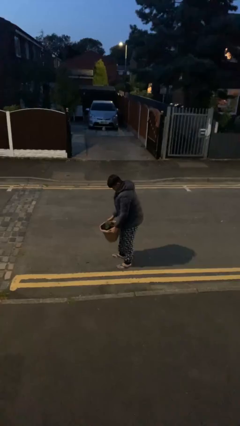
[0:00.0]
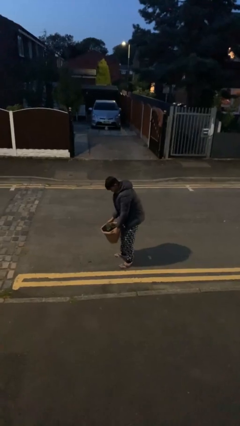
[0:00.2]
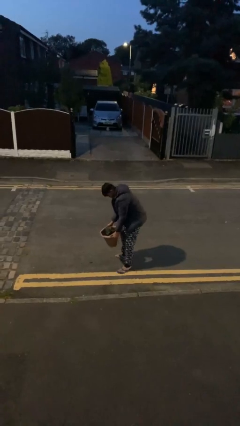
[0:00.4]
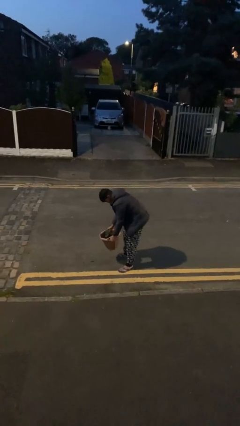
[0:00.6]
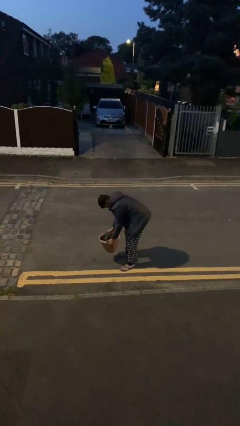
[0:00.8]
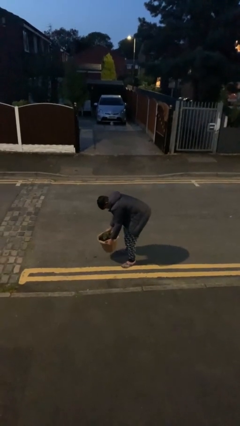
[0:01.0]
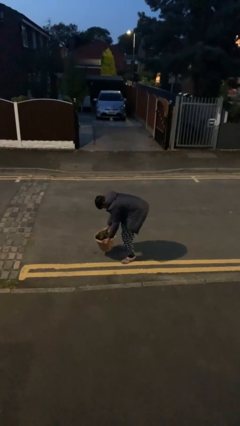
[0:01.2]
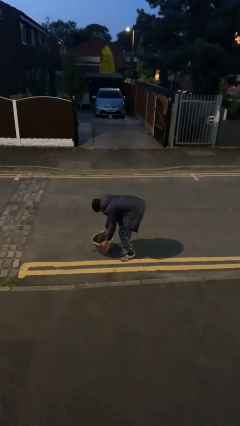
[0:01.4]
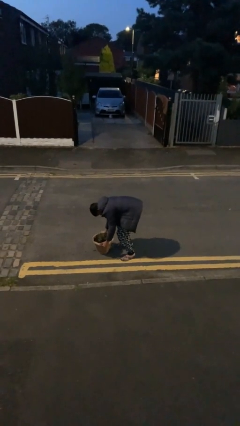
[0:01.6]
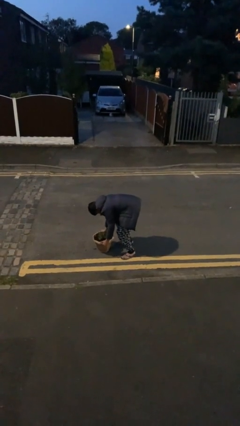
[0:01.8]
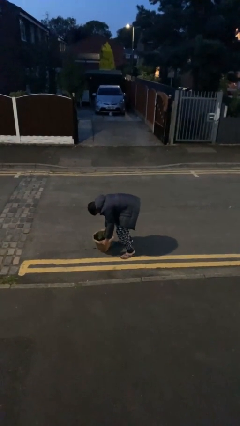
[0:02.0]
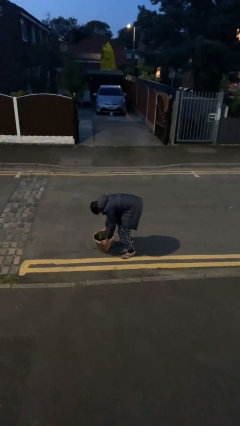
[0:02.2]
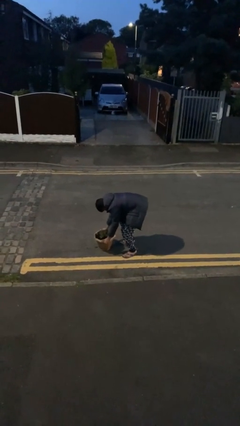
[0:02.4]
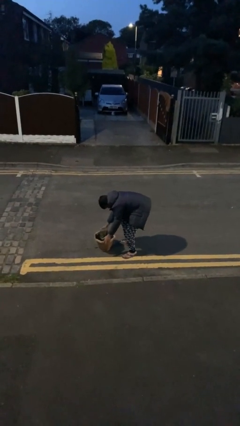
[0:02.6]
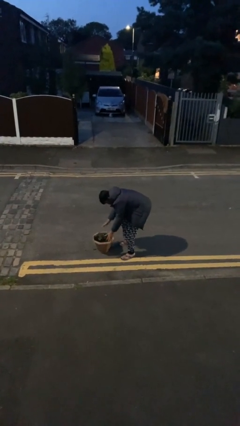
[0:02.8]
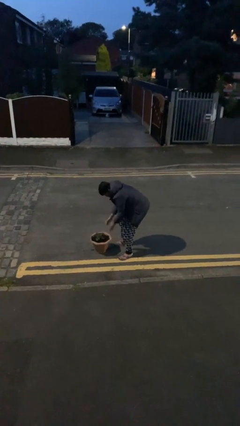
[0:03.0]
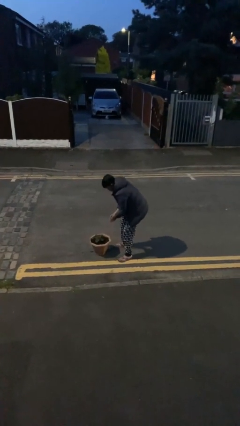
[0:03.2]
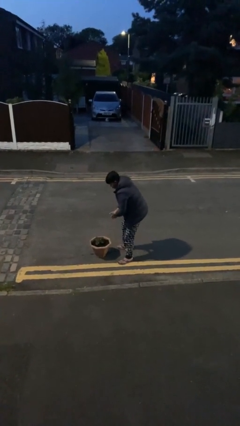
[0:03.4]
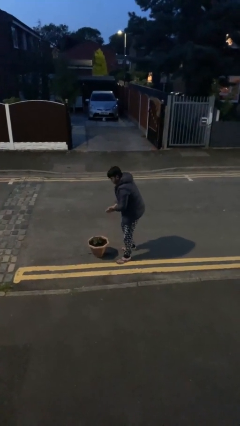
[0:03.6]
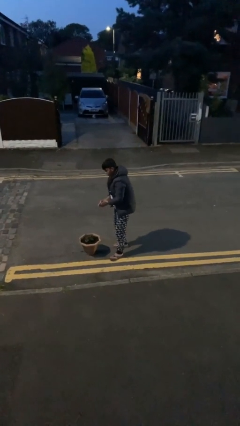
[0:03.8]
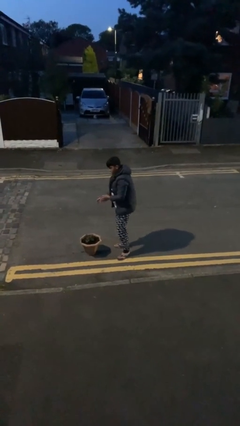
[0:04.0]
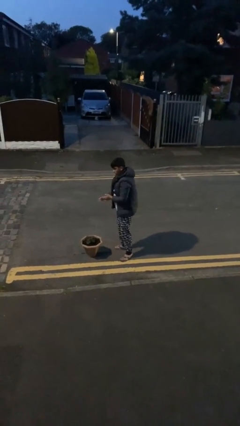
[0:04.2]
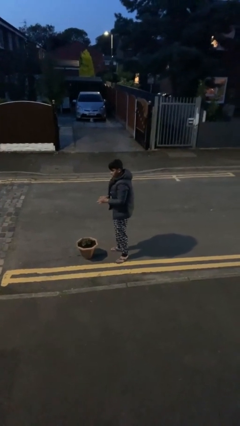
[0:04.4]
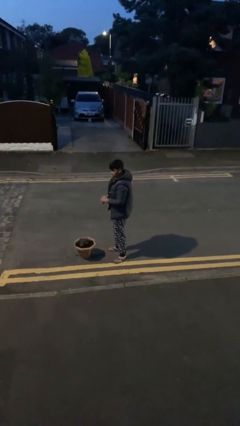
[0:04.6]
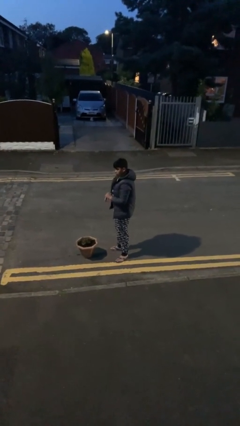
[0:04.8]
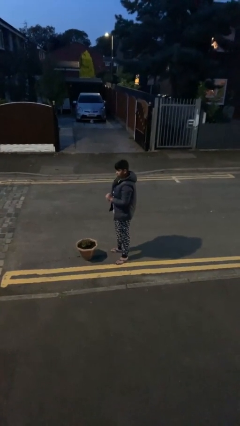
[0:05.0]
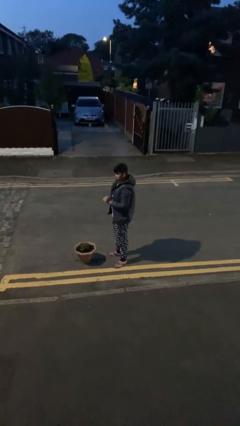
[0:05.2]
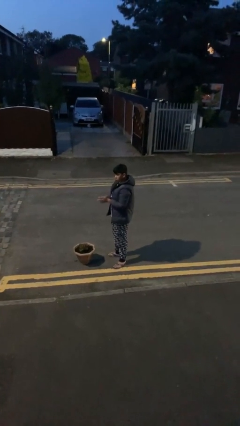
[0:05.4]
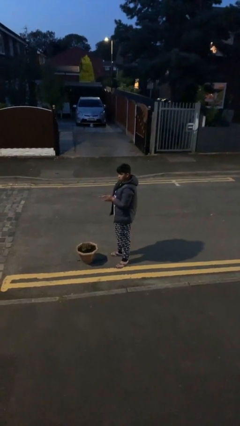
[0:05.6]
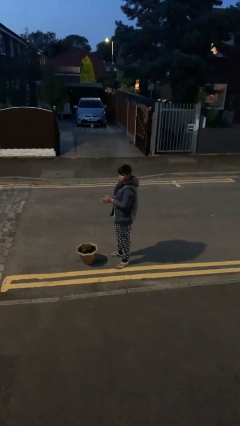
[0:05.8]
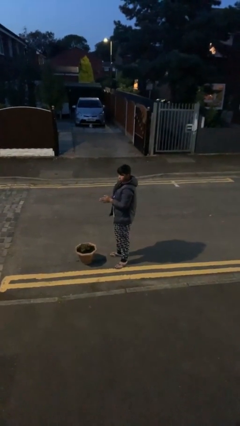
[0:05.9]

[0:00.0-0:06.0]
person puts down object on floor

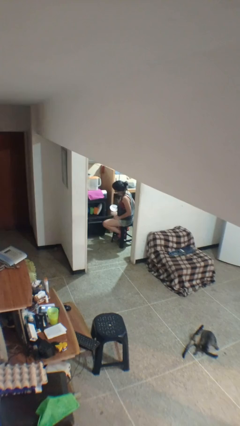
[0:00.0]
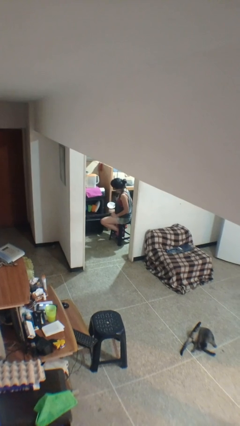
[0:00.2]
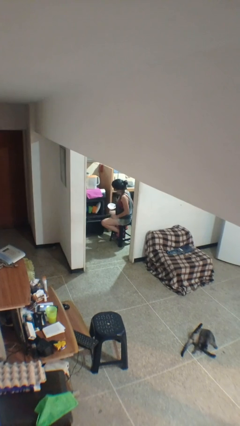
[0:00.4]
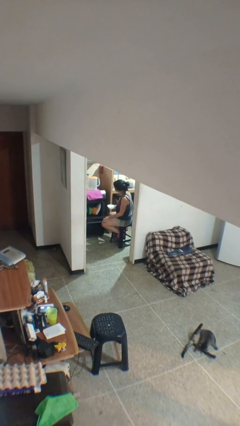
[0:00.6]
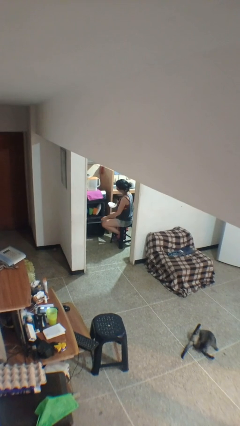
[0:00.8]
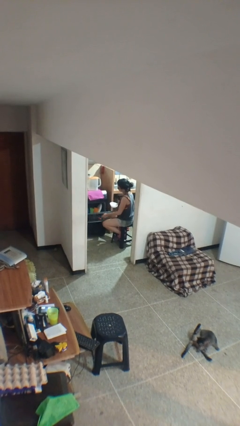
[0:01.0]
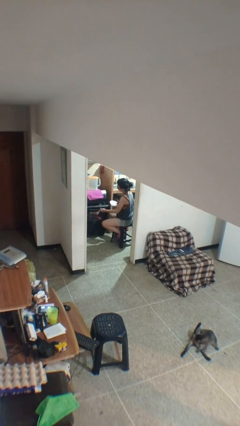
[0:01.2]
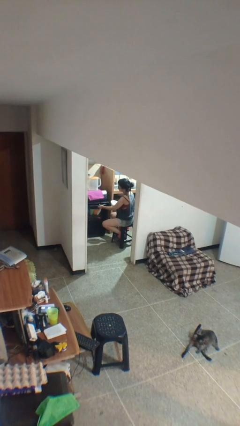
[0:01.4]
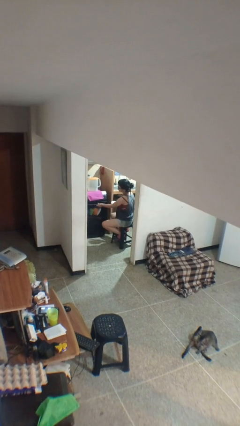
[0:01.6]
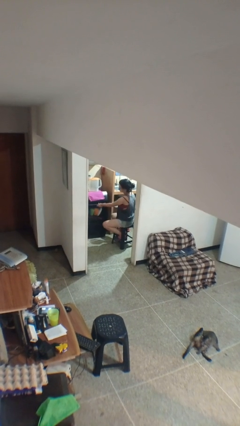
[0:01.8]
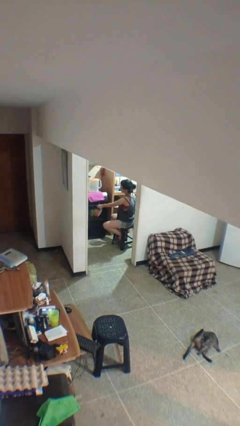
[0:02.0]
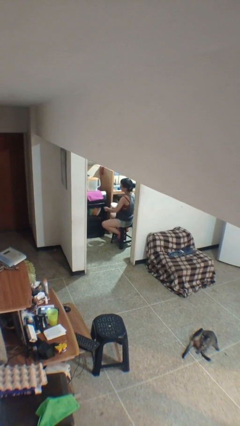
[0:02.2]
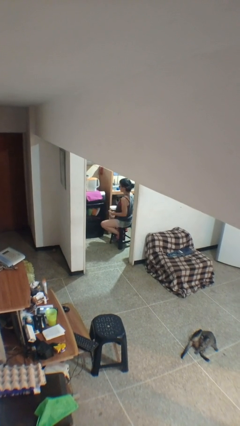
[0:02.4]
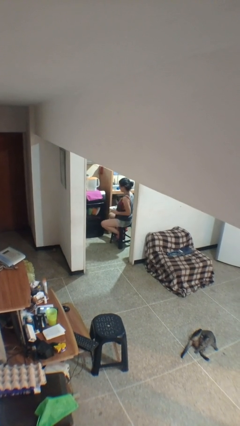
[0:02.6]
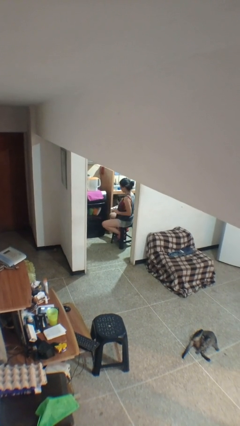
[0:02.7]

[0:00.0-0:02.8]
person closes dishwasher

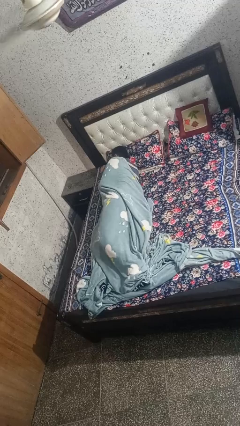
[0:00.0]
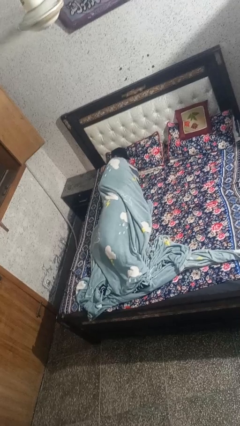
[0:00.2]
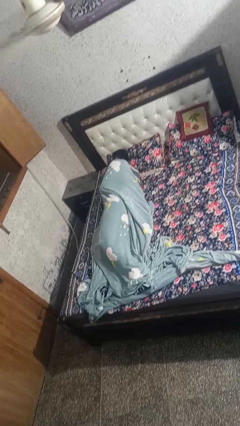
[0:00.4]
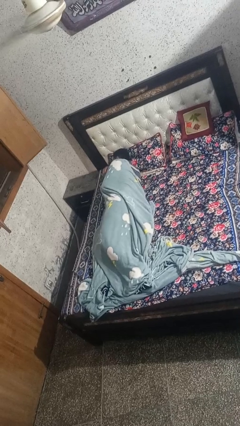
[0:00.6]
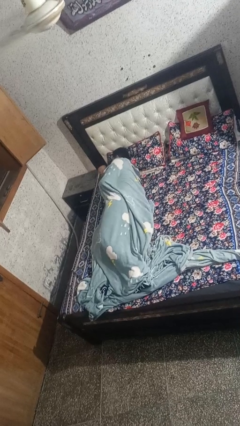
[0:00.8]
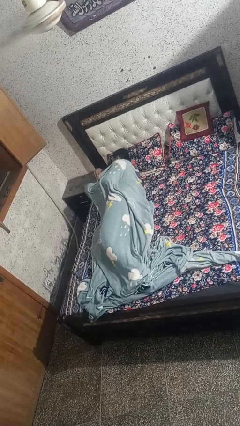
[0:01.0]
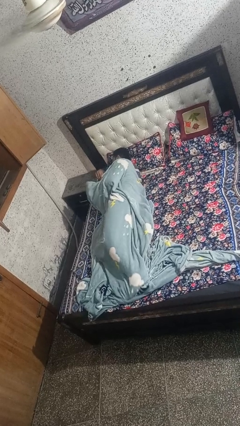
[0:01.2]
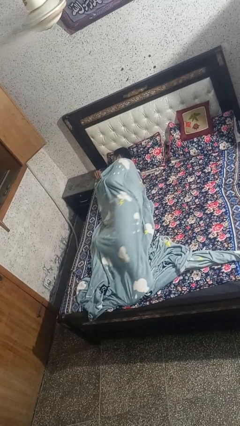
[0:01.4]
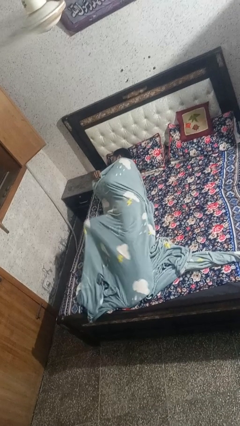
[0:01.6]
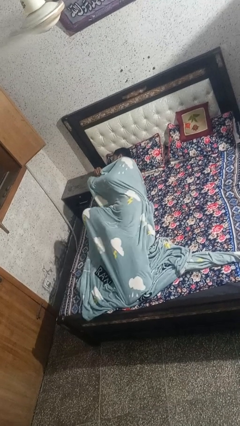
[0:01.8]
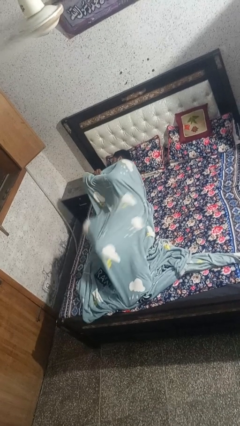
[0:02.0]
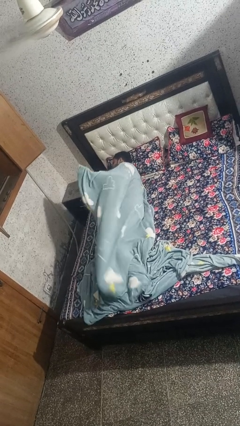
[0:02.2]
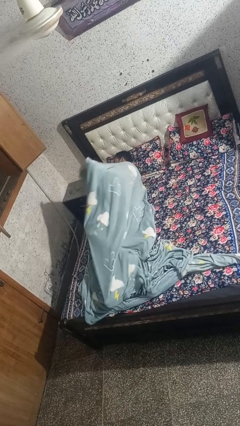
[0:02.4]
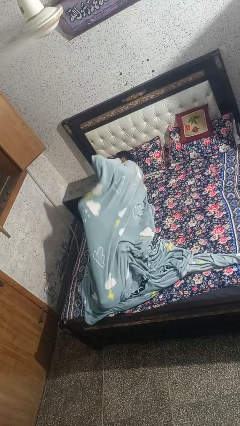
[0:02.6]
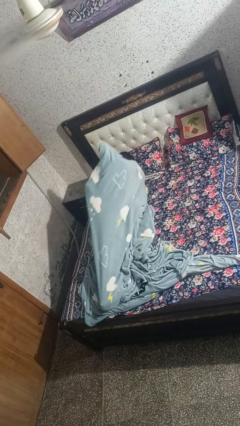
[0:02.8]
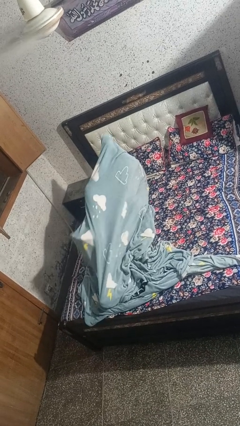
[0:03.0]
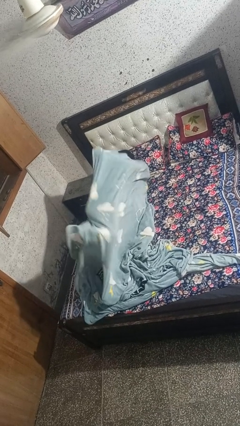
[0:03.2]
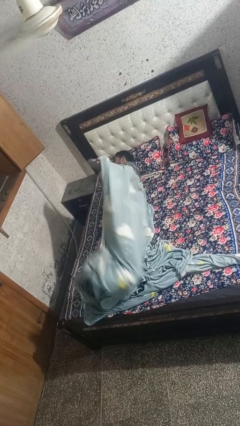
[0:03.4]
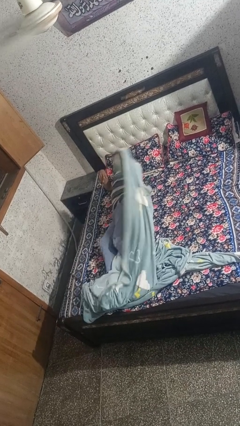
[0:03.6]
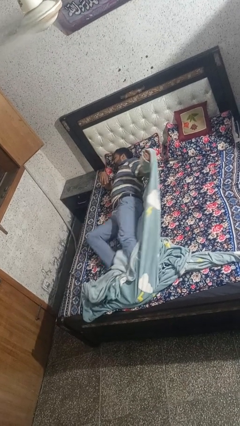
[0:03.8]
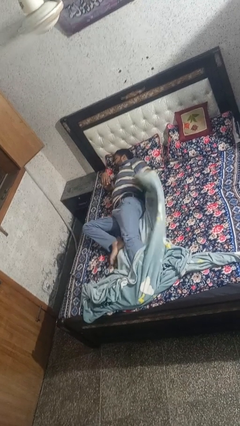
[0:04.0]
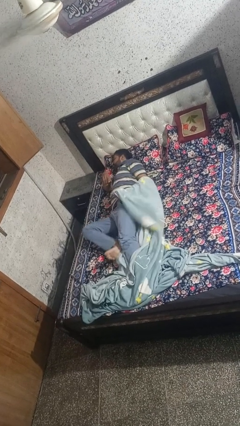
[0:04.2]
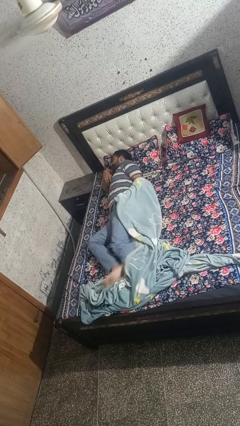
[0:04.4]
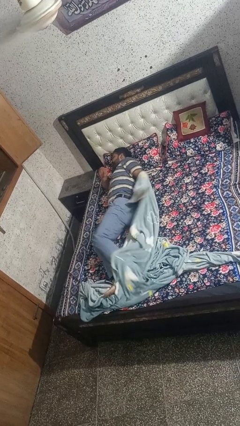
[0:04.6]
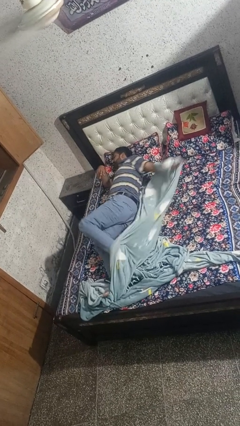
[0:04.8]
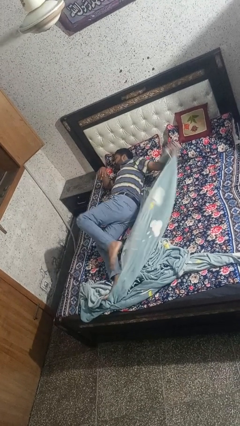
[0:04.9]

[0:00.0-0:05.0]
person uncovers with bedsheets

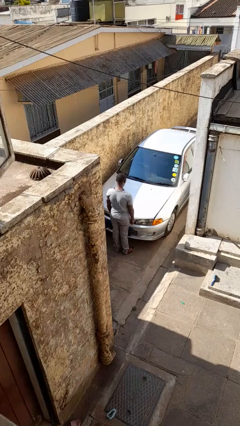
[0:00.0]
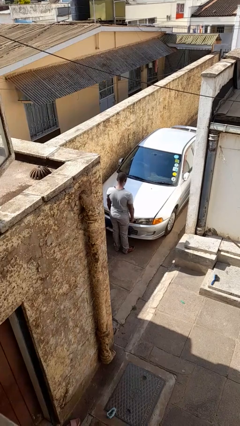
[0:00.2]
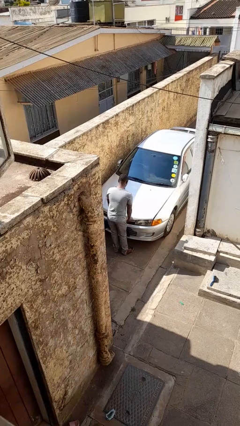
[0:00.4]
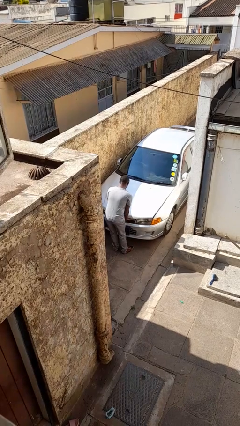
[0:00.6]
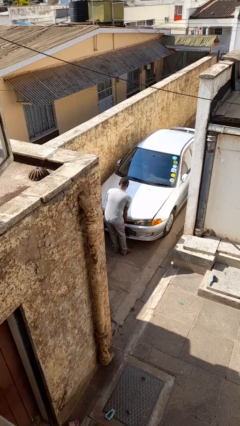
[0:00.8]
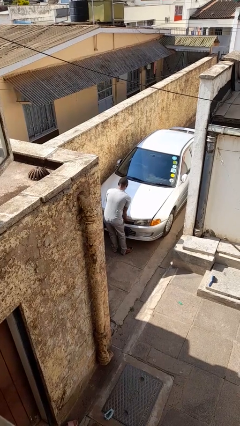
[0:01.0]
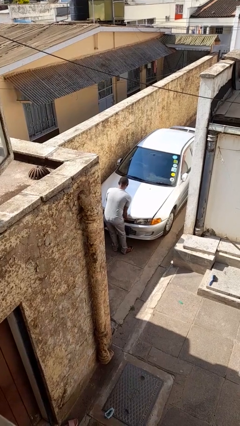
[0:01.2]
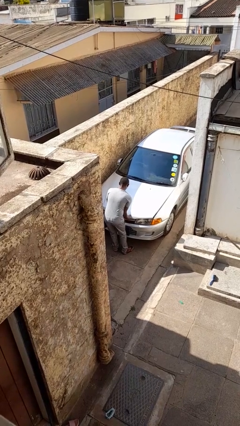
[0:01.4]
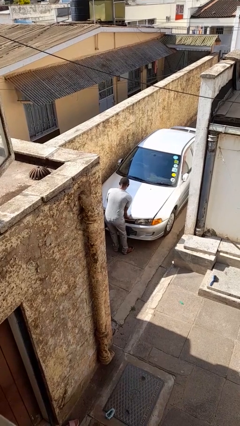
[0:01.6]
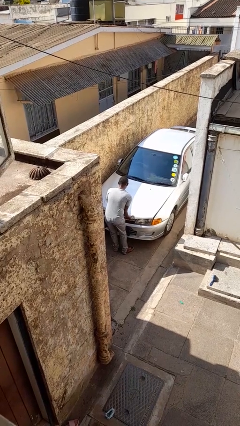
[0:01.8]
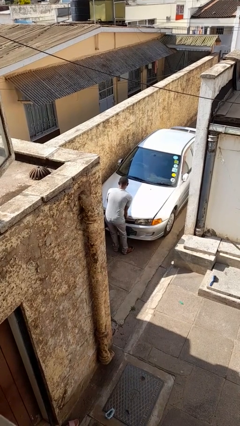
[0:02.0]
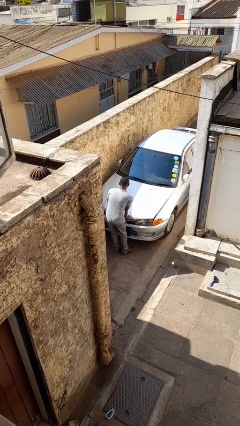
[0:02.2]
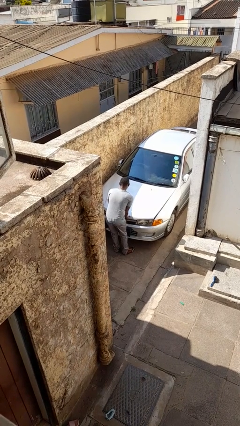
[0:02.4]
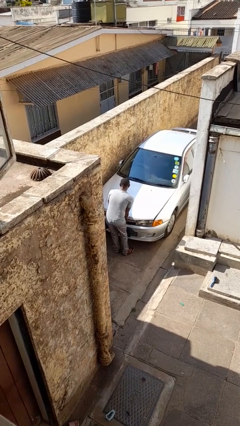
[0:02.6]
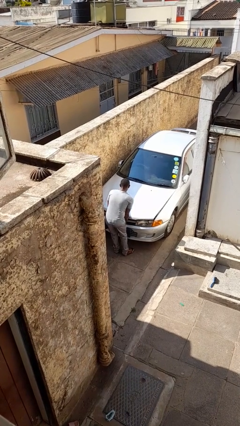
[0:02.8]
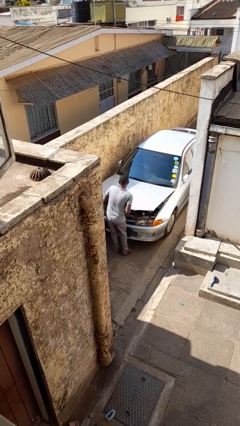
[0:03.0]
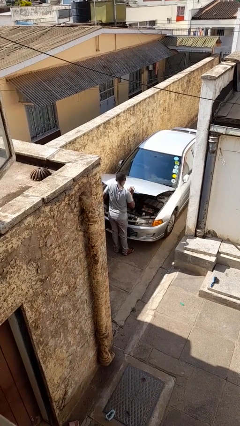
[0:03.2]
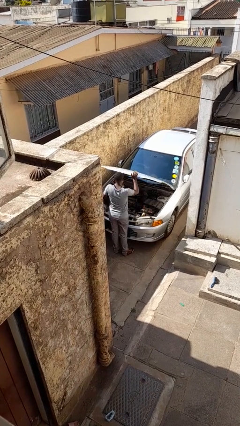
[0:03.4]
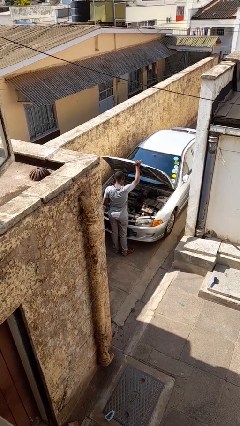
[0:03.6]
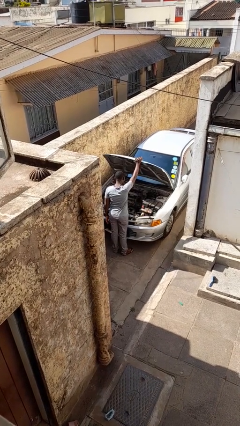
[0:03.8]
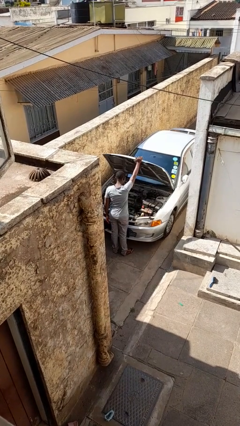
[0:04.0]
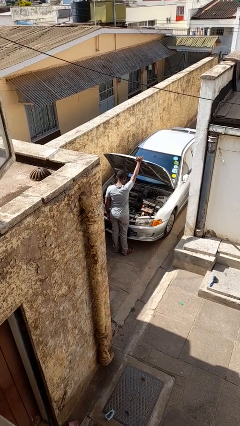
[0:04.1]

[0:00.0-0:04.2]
person opens car hood

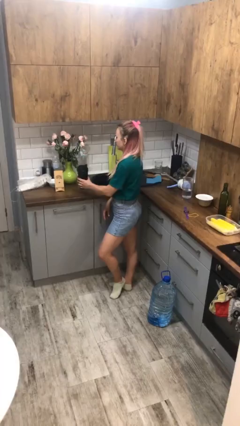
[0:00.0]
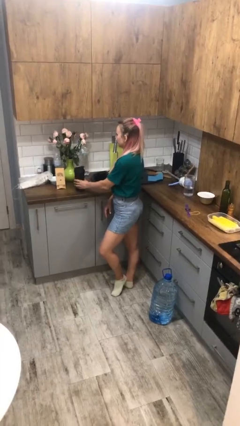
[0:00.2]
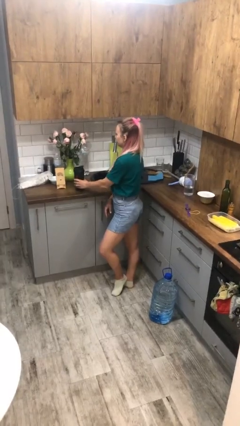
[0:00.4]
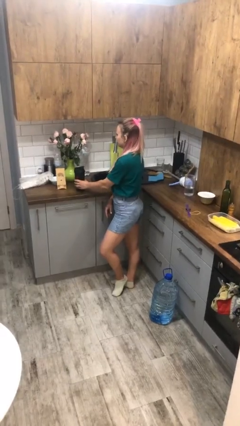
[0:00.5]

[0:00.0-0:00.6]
person puts down object on countertop
